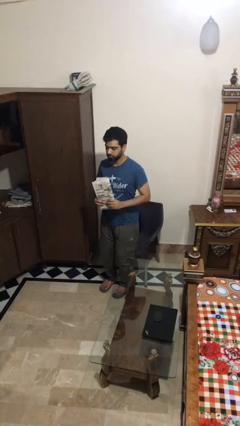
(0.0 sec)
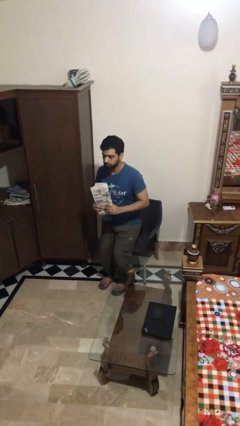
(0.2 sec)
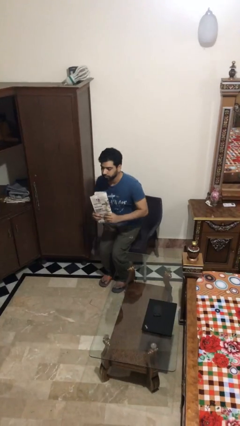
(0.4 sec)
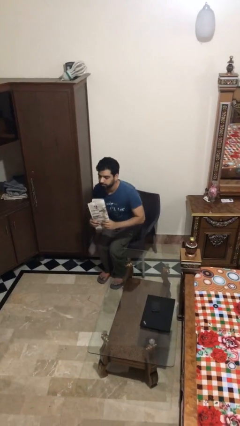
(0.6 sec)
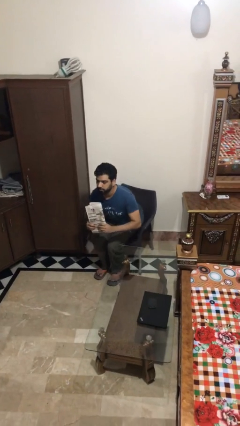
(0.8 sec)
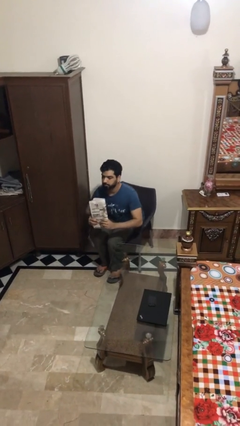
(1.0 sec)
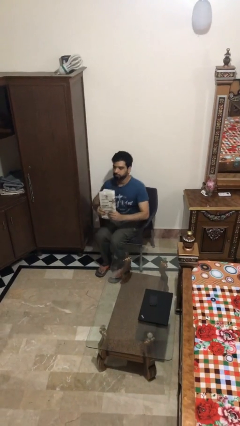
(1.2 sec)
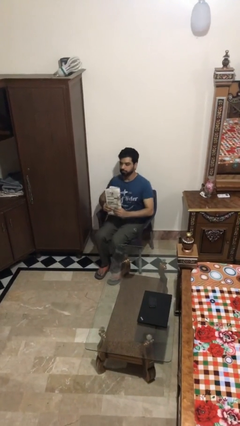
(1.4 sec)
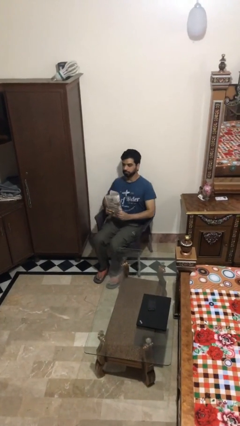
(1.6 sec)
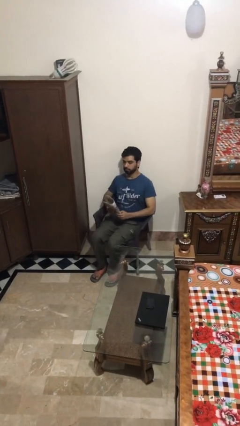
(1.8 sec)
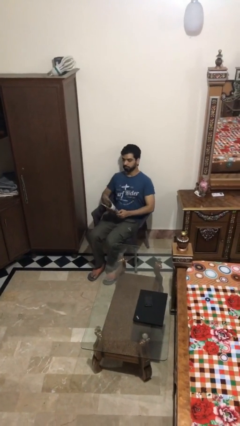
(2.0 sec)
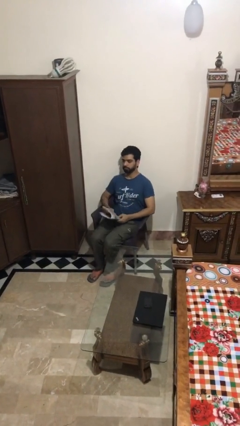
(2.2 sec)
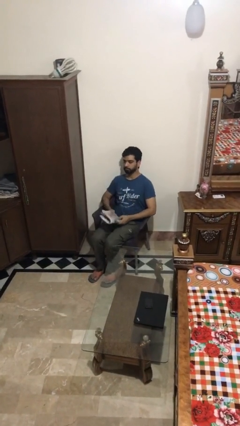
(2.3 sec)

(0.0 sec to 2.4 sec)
person sits down

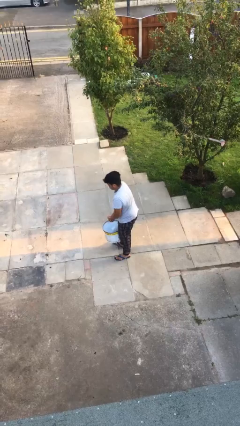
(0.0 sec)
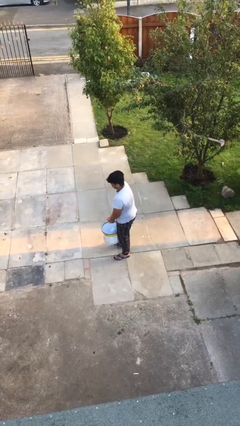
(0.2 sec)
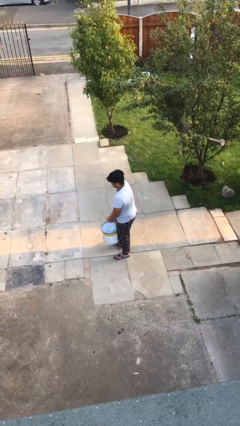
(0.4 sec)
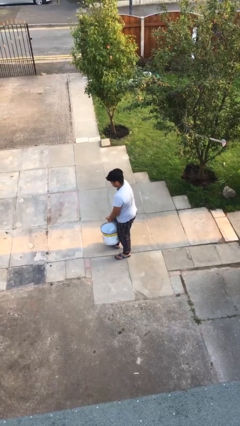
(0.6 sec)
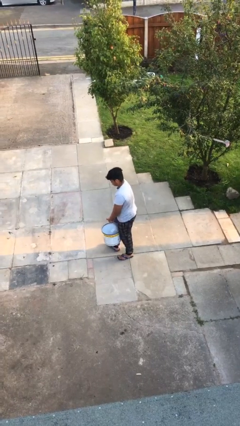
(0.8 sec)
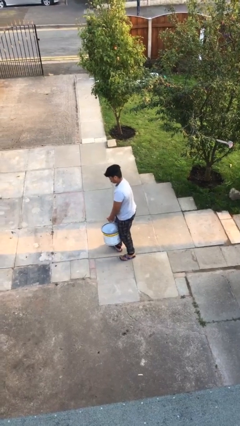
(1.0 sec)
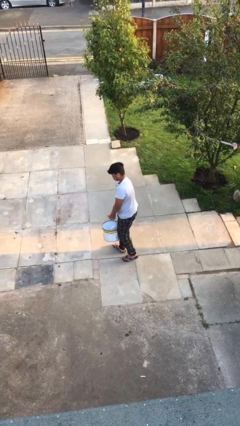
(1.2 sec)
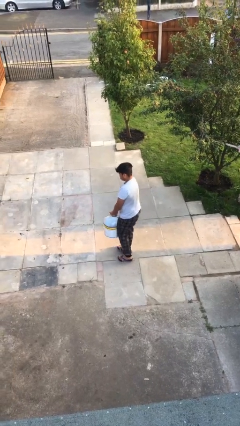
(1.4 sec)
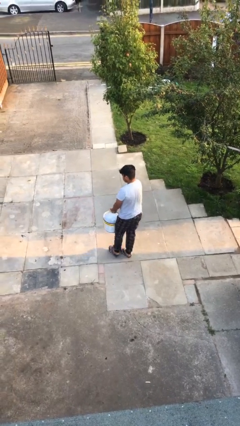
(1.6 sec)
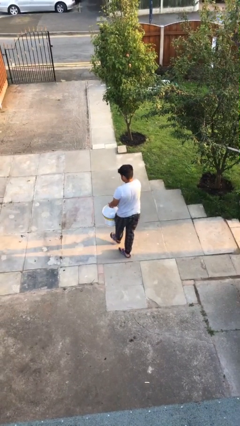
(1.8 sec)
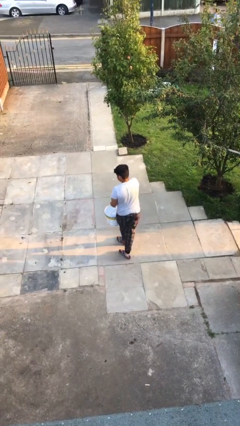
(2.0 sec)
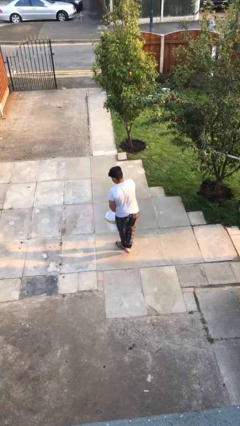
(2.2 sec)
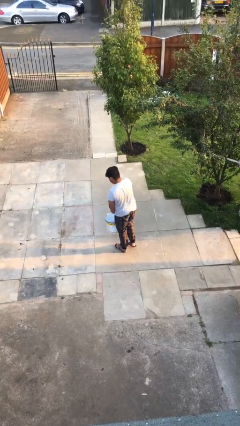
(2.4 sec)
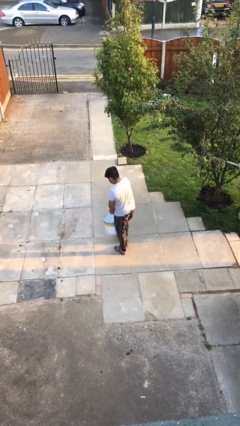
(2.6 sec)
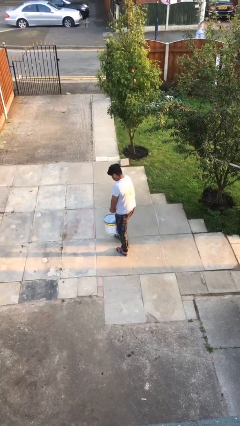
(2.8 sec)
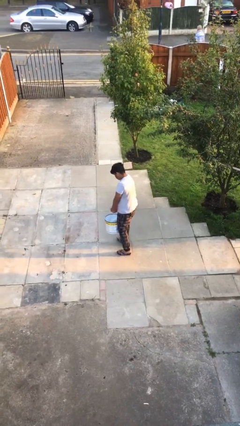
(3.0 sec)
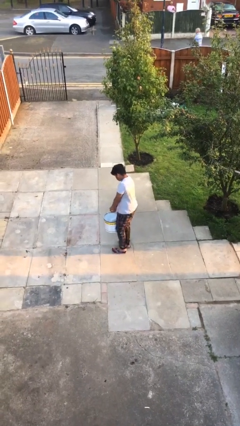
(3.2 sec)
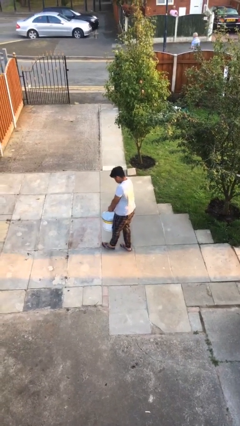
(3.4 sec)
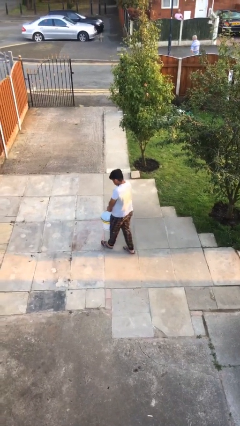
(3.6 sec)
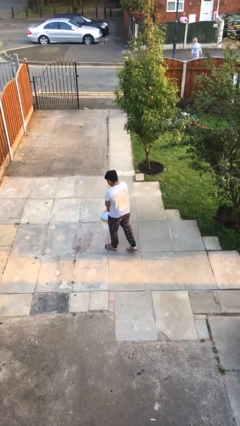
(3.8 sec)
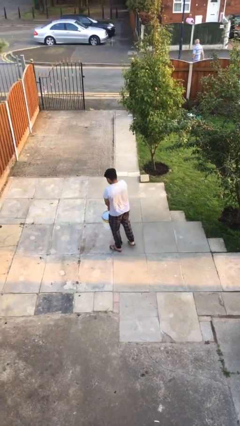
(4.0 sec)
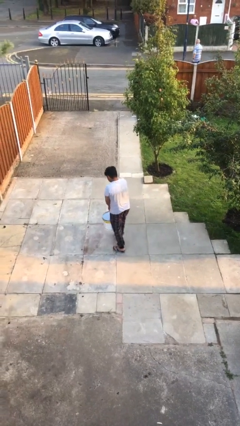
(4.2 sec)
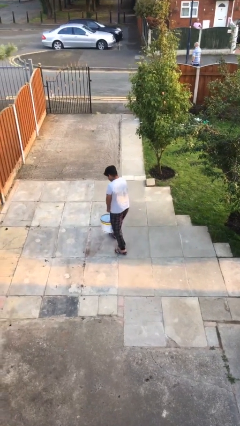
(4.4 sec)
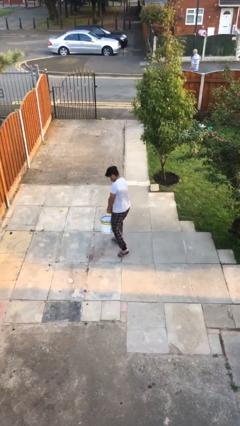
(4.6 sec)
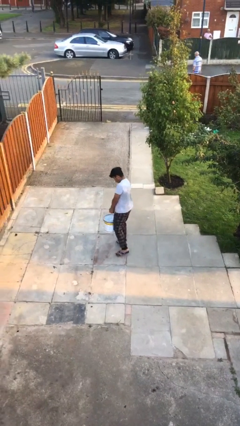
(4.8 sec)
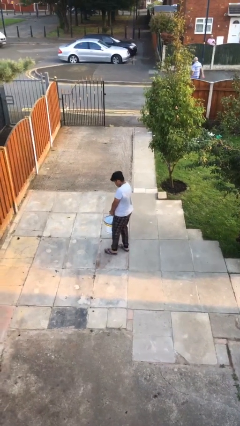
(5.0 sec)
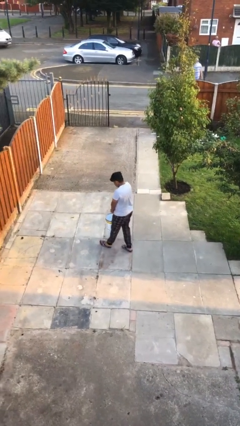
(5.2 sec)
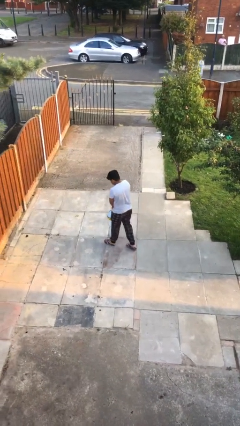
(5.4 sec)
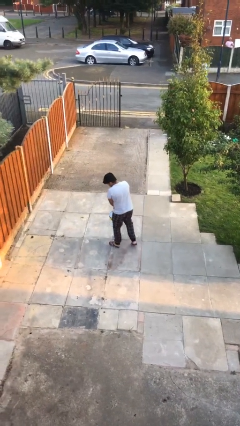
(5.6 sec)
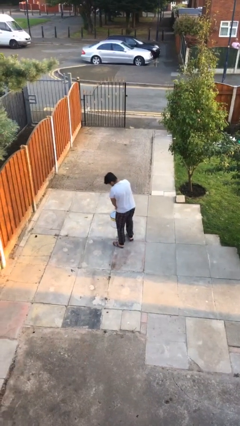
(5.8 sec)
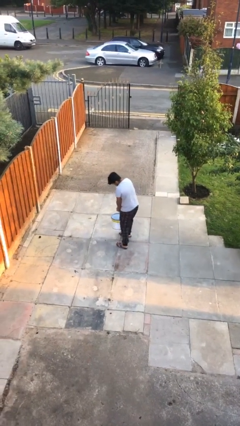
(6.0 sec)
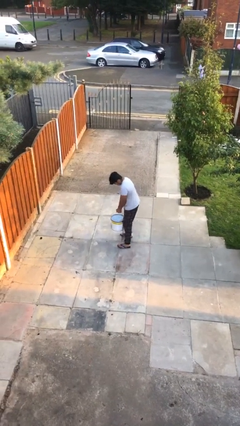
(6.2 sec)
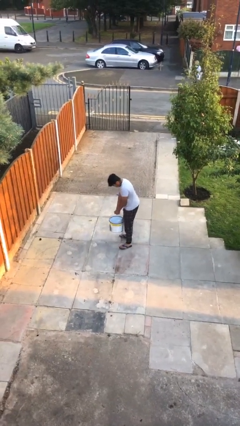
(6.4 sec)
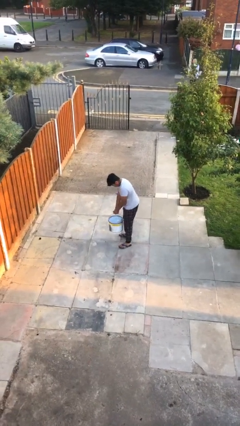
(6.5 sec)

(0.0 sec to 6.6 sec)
person carries heavy object

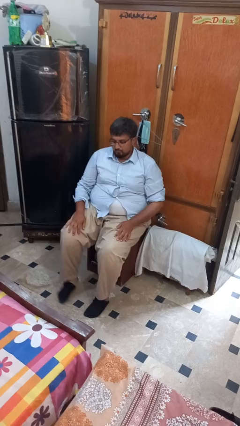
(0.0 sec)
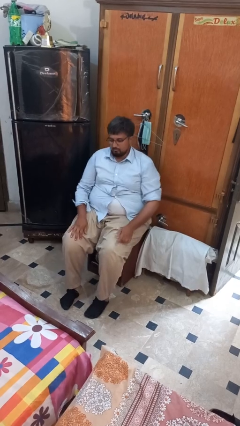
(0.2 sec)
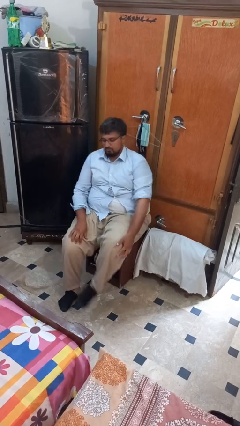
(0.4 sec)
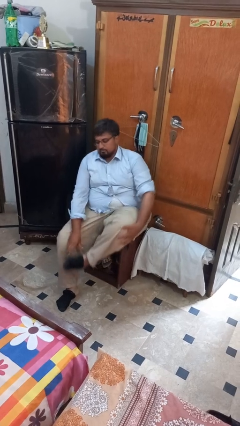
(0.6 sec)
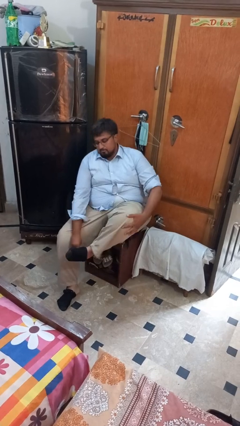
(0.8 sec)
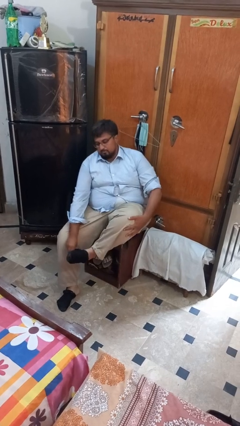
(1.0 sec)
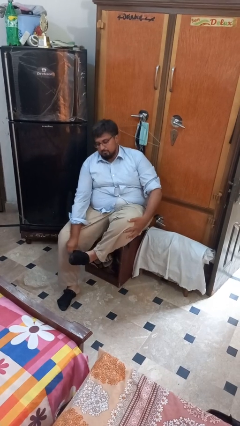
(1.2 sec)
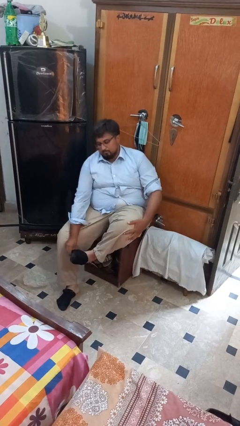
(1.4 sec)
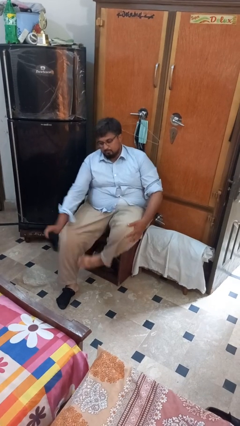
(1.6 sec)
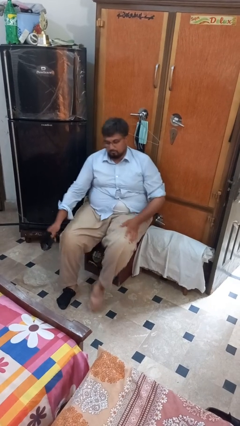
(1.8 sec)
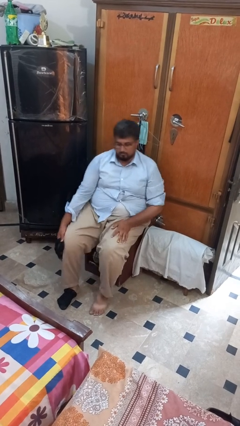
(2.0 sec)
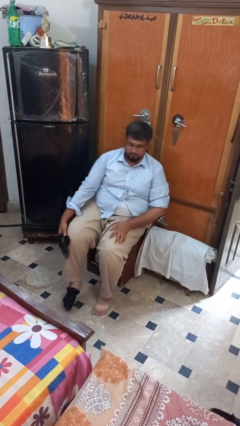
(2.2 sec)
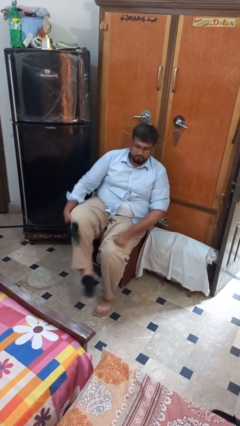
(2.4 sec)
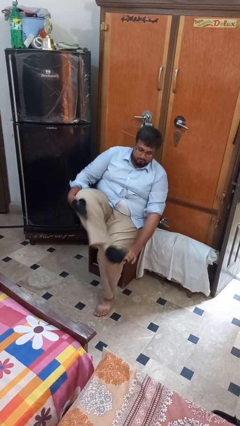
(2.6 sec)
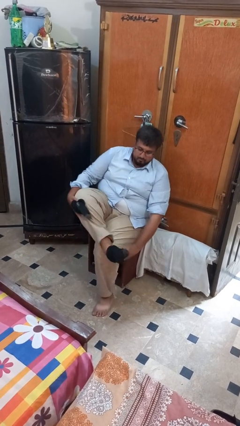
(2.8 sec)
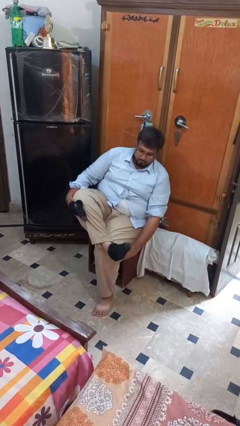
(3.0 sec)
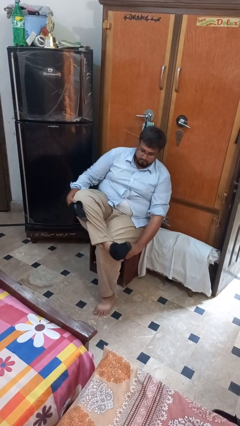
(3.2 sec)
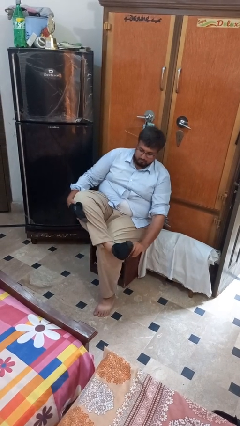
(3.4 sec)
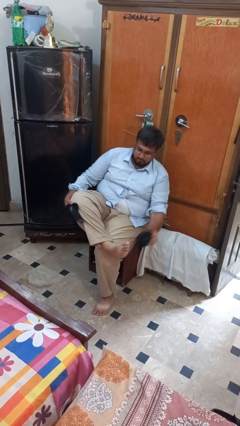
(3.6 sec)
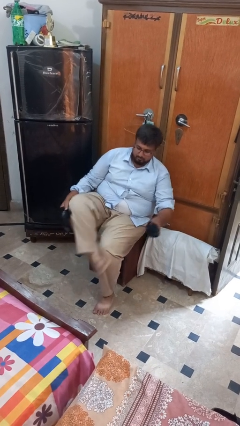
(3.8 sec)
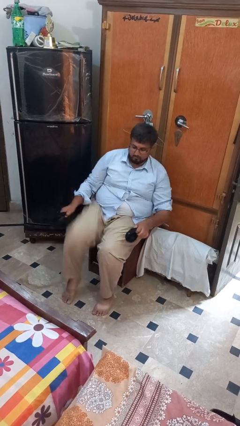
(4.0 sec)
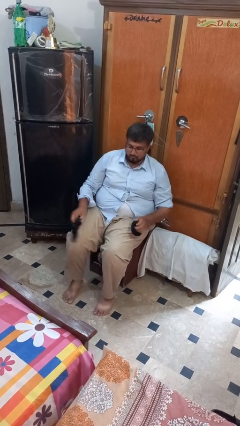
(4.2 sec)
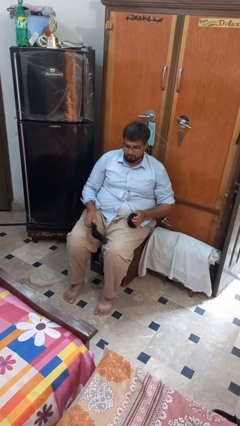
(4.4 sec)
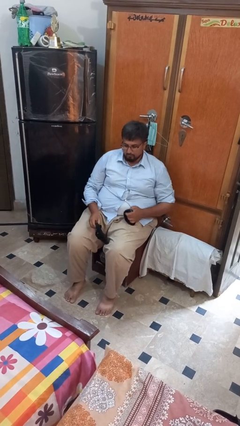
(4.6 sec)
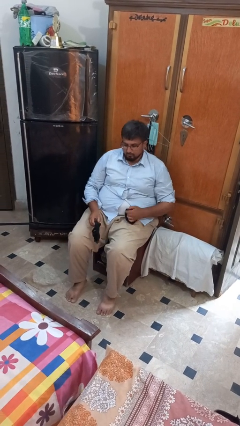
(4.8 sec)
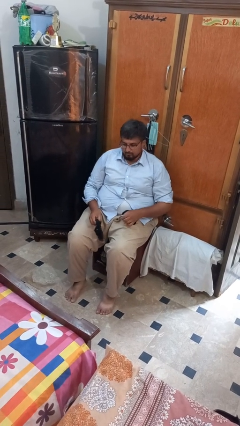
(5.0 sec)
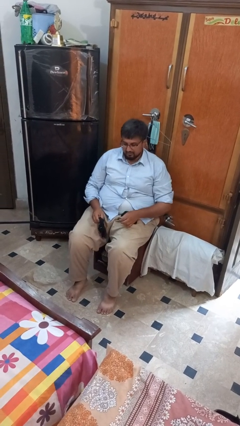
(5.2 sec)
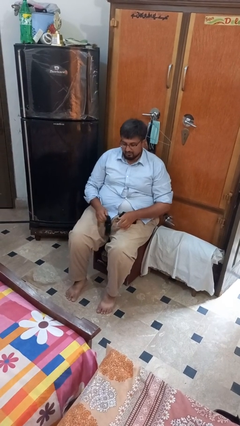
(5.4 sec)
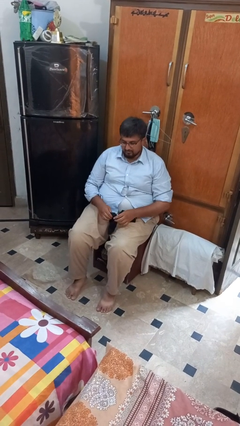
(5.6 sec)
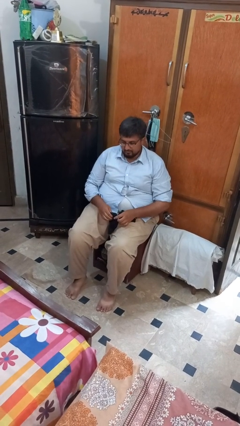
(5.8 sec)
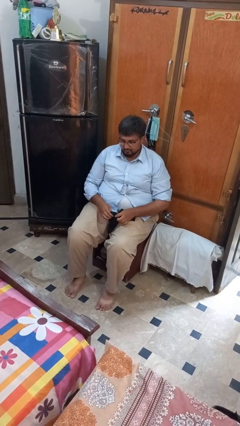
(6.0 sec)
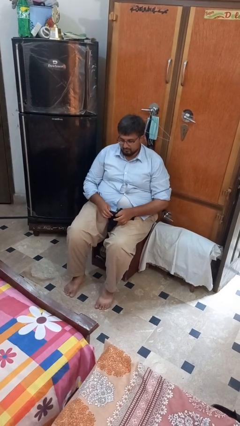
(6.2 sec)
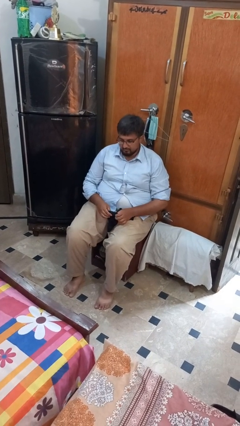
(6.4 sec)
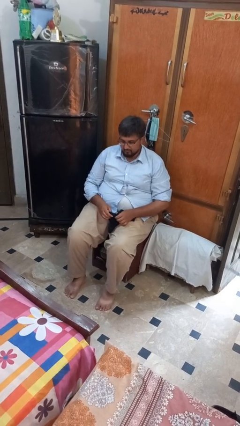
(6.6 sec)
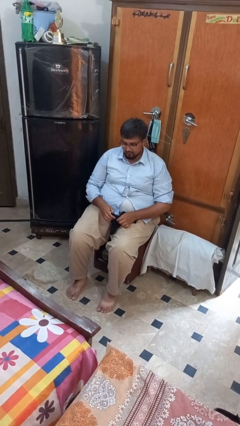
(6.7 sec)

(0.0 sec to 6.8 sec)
person takes off socks

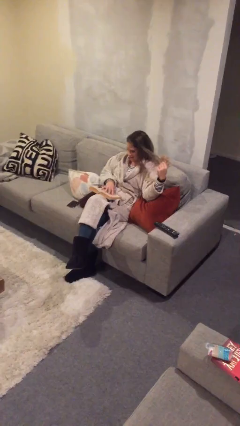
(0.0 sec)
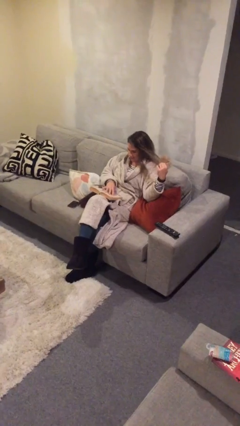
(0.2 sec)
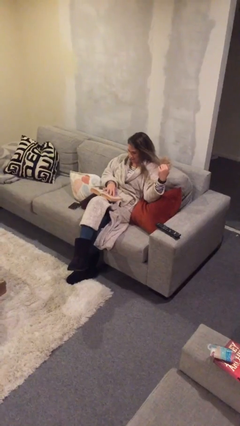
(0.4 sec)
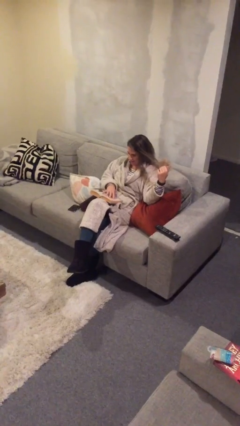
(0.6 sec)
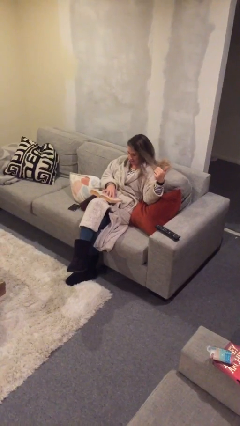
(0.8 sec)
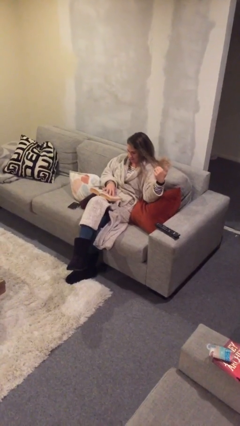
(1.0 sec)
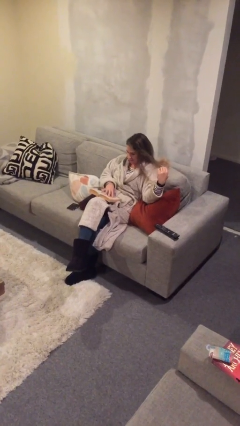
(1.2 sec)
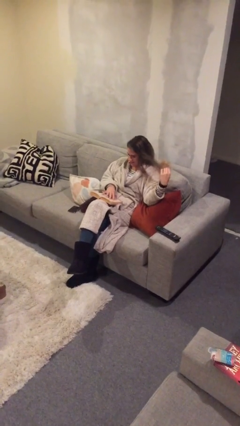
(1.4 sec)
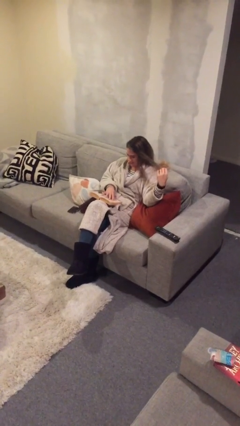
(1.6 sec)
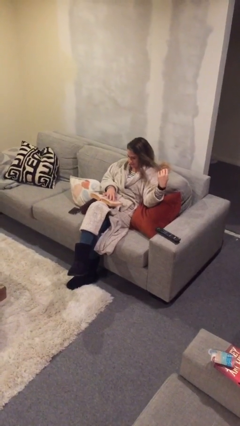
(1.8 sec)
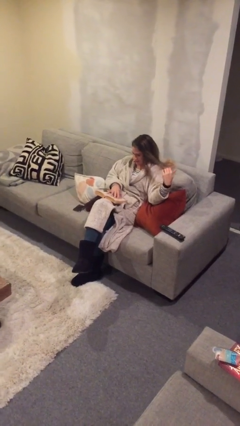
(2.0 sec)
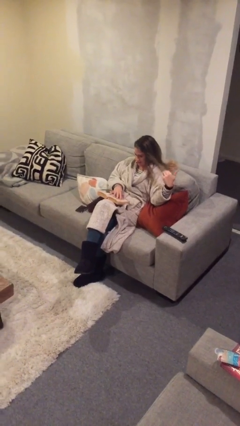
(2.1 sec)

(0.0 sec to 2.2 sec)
person reads document
